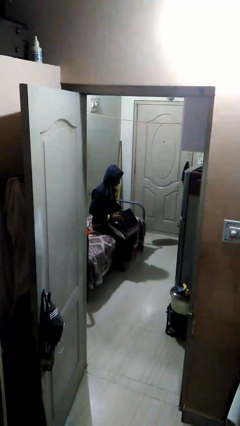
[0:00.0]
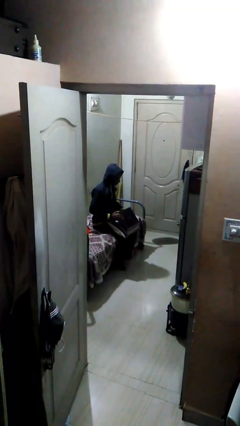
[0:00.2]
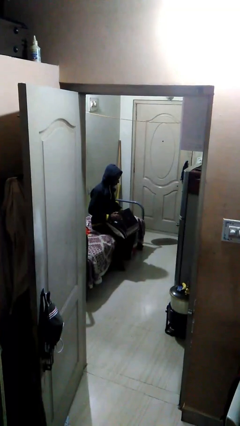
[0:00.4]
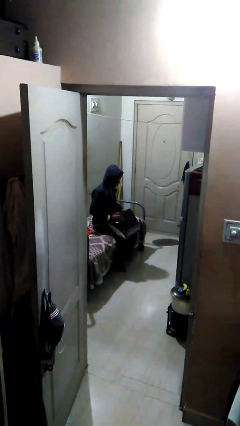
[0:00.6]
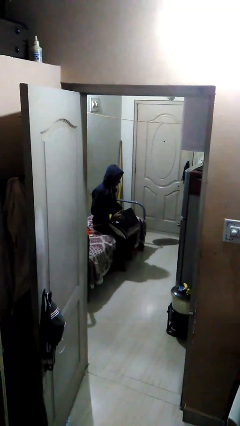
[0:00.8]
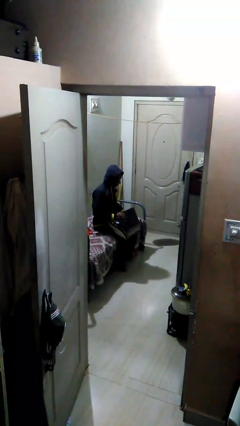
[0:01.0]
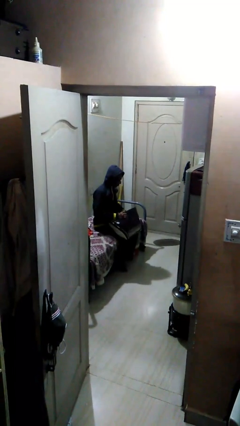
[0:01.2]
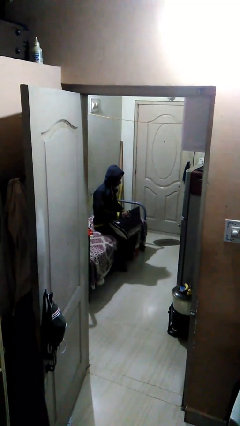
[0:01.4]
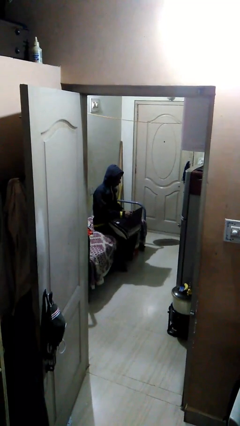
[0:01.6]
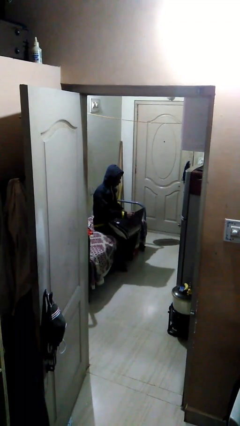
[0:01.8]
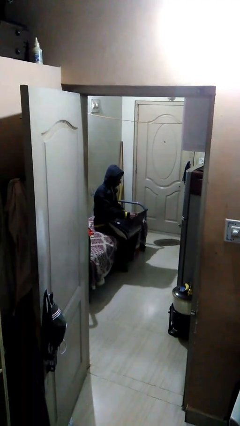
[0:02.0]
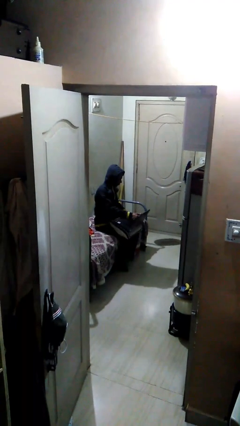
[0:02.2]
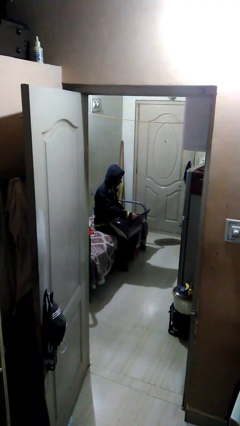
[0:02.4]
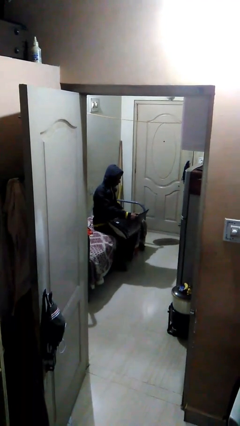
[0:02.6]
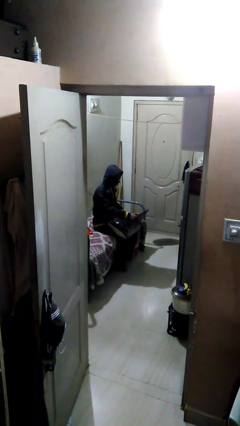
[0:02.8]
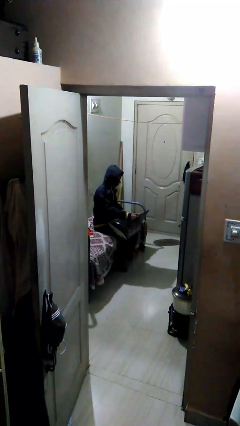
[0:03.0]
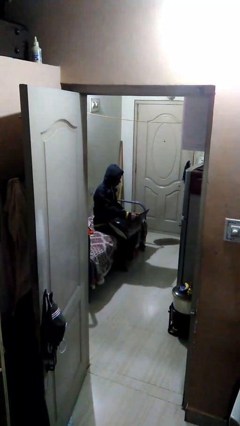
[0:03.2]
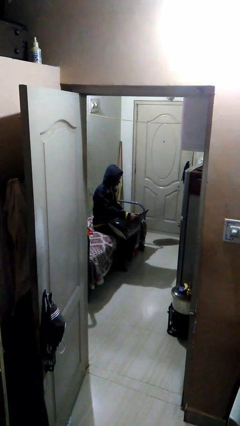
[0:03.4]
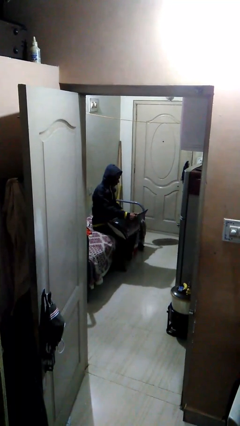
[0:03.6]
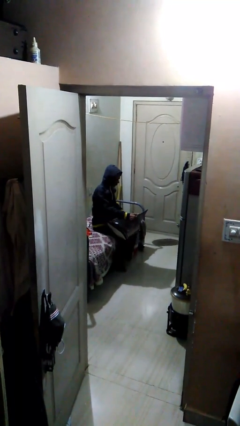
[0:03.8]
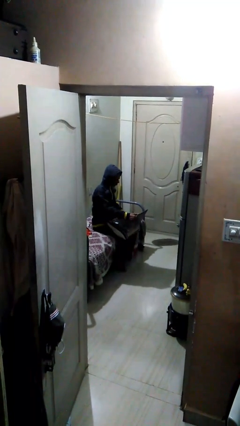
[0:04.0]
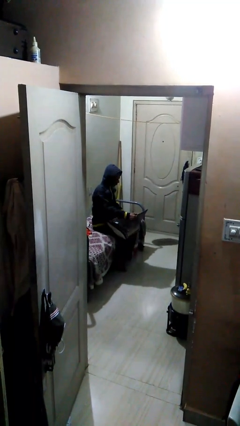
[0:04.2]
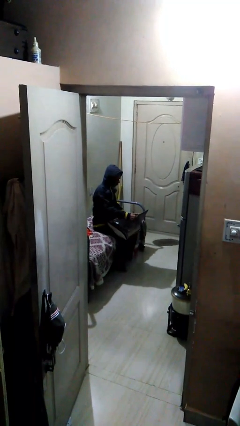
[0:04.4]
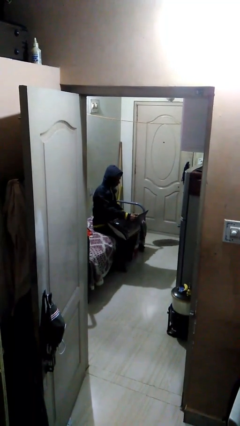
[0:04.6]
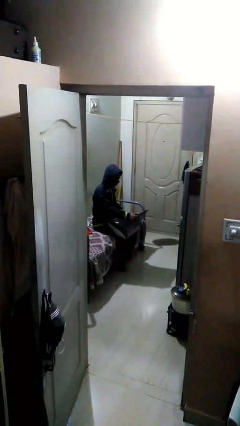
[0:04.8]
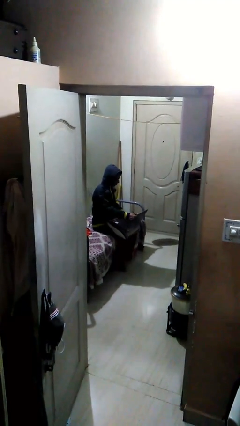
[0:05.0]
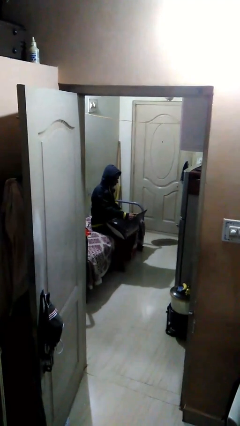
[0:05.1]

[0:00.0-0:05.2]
person interacts with laptop

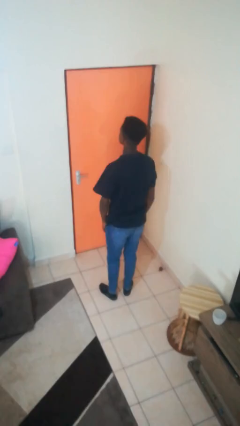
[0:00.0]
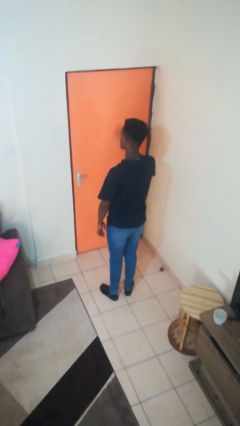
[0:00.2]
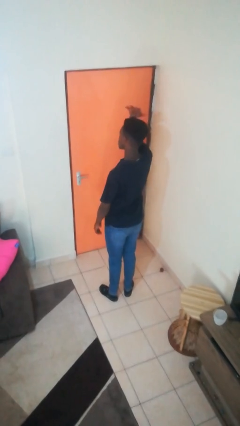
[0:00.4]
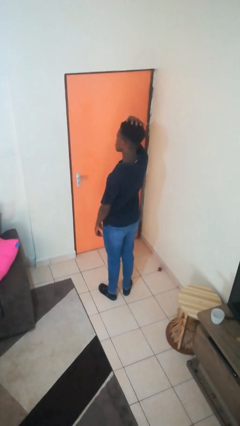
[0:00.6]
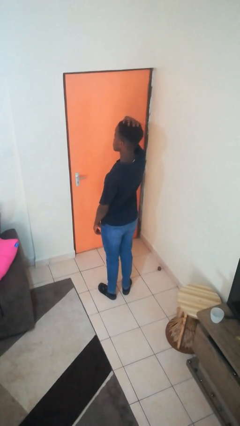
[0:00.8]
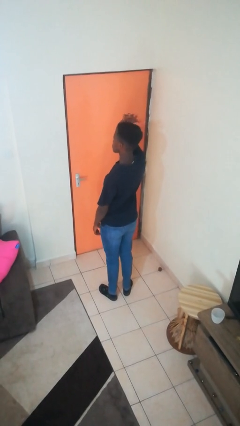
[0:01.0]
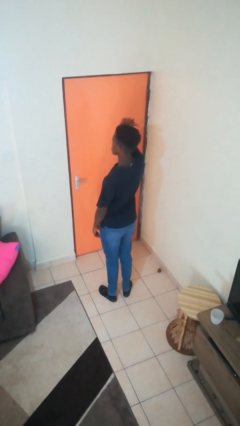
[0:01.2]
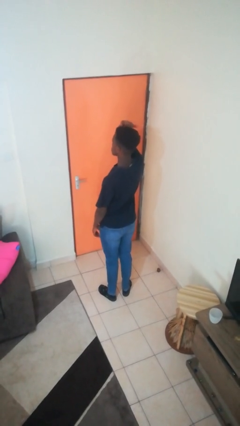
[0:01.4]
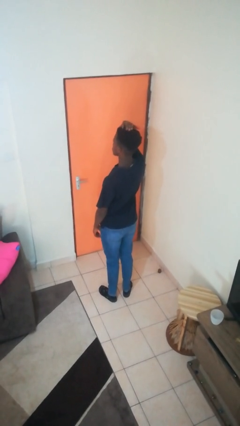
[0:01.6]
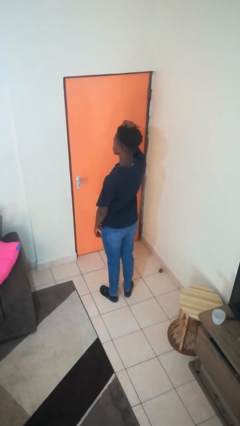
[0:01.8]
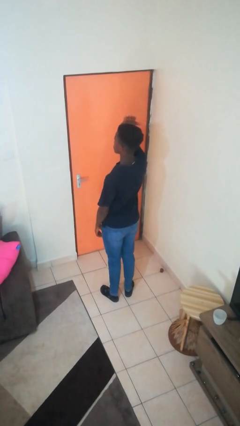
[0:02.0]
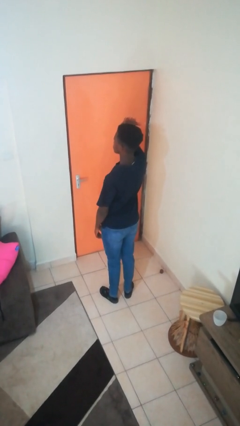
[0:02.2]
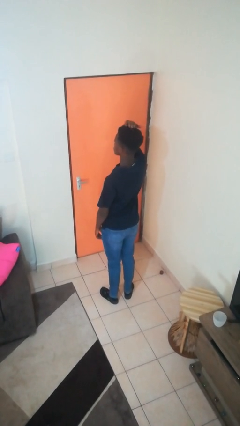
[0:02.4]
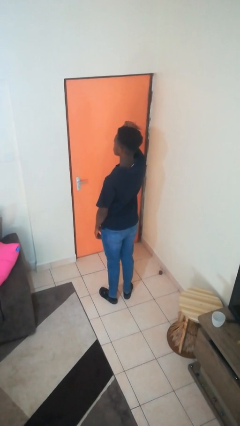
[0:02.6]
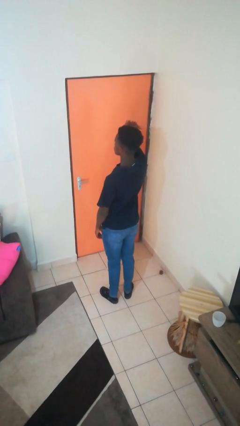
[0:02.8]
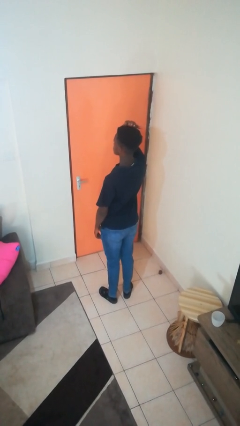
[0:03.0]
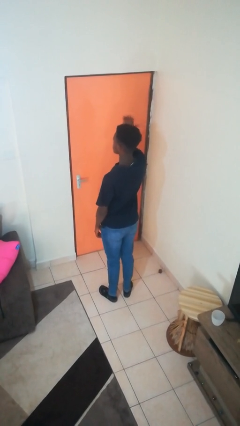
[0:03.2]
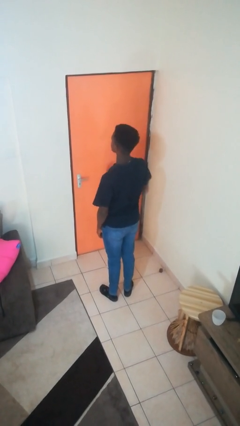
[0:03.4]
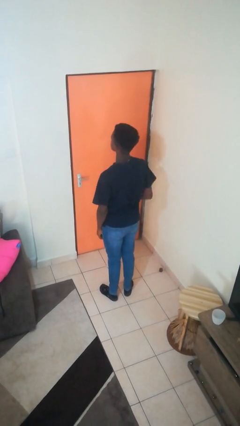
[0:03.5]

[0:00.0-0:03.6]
person pats head

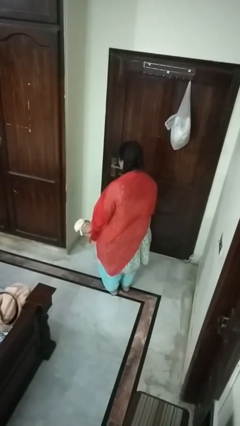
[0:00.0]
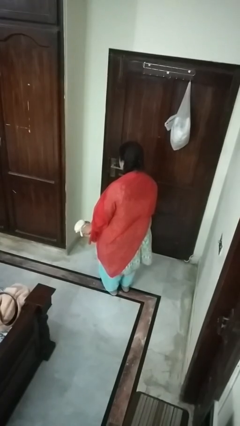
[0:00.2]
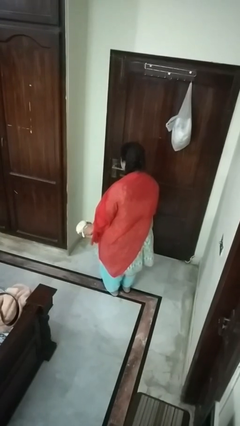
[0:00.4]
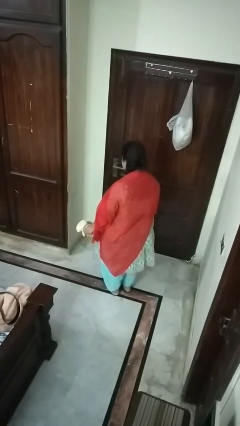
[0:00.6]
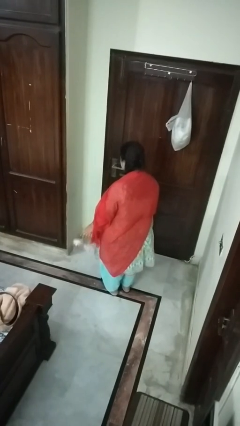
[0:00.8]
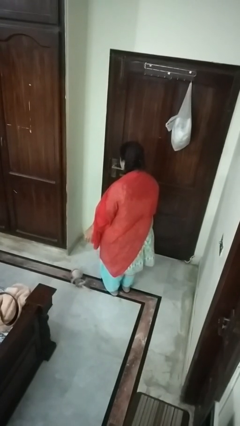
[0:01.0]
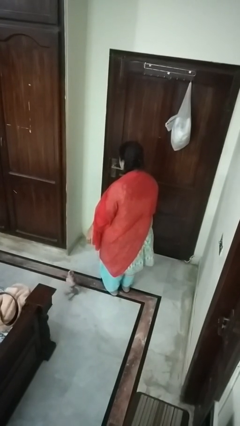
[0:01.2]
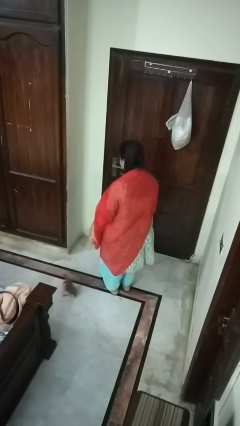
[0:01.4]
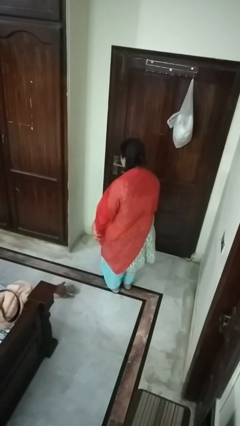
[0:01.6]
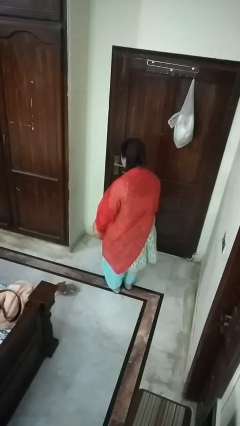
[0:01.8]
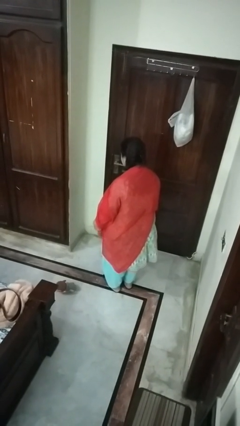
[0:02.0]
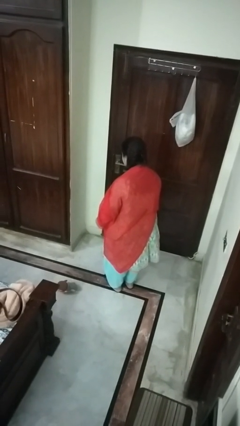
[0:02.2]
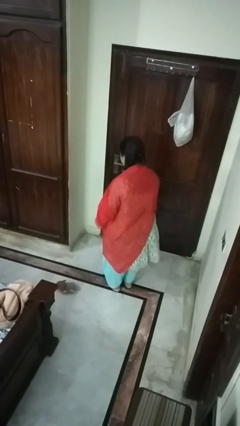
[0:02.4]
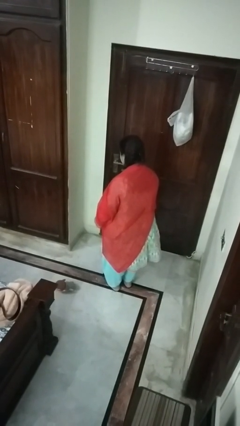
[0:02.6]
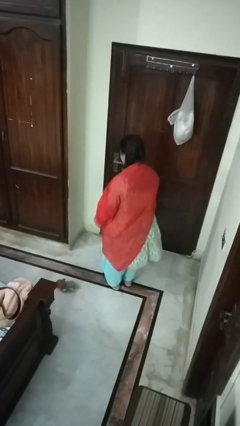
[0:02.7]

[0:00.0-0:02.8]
person drops object

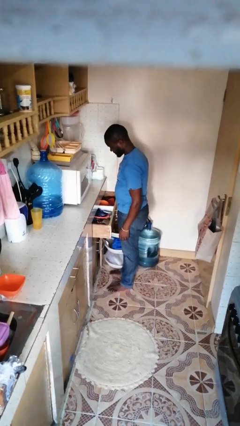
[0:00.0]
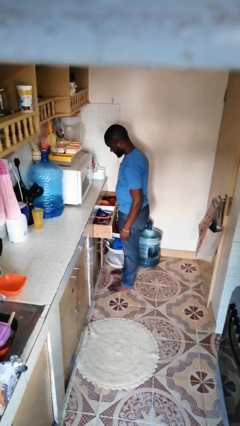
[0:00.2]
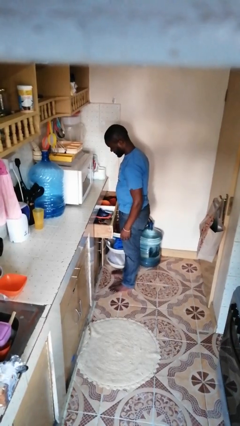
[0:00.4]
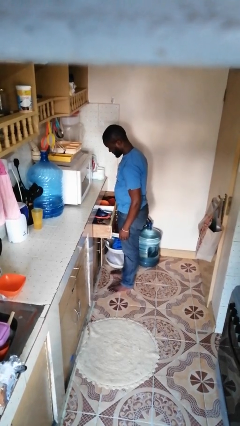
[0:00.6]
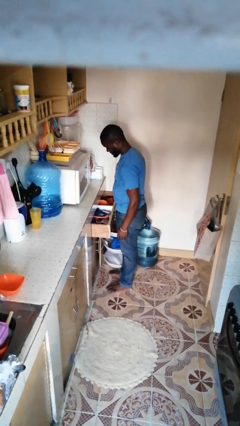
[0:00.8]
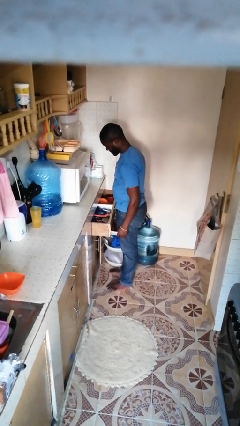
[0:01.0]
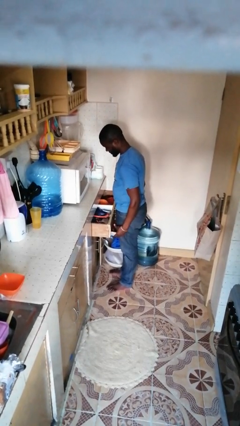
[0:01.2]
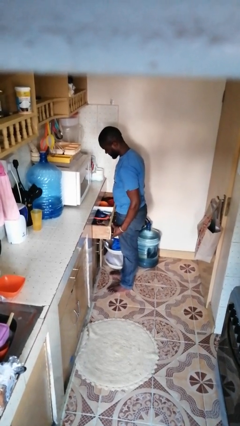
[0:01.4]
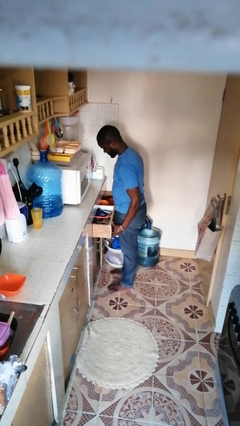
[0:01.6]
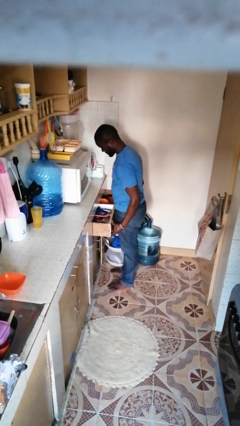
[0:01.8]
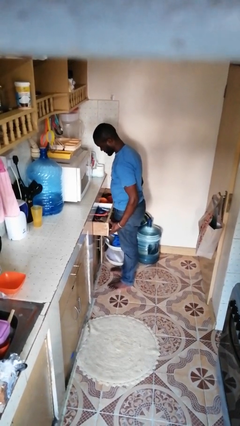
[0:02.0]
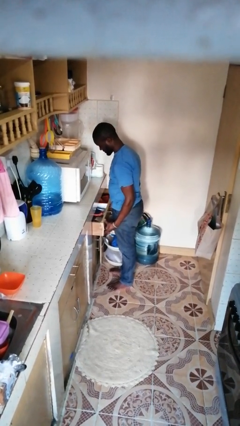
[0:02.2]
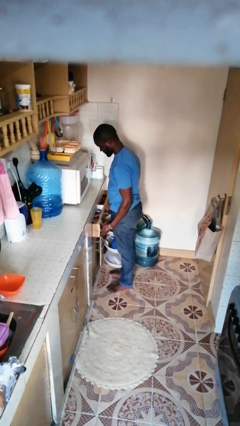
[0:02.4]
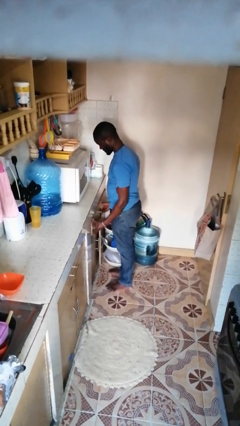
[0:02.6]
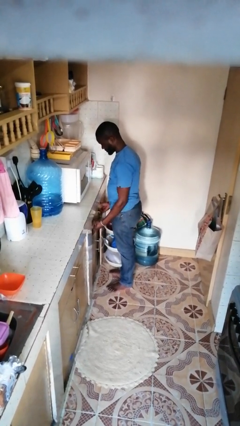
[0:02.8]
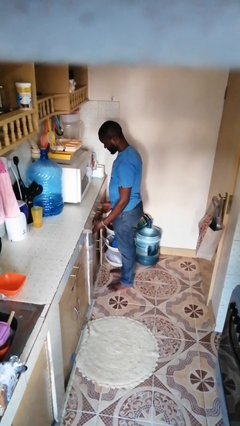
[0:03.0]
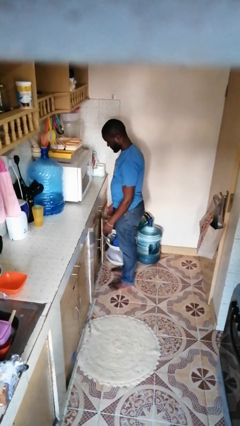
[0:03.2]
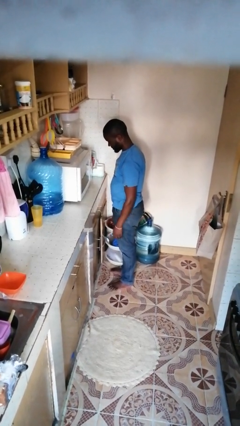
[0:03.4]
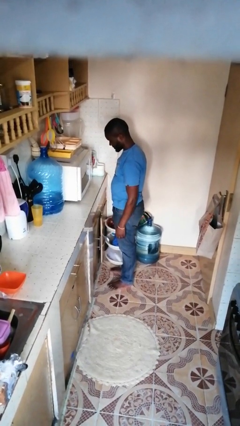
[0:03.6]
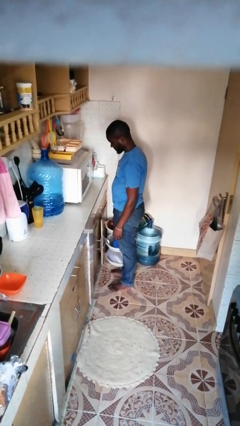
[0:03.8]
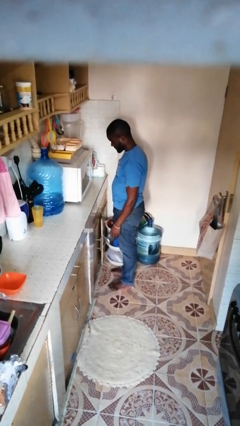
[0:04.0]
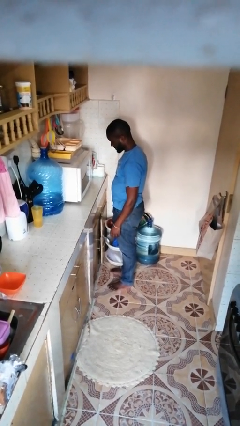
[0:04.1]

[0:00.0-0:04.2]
person closes kitchen drawer

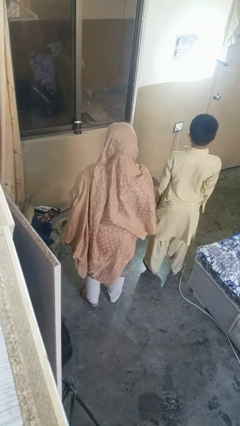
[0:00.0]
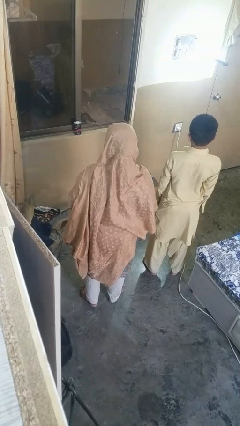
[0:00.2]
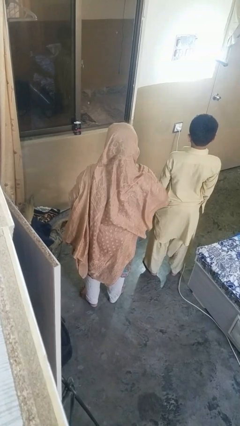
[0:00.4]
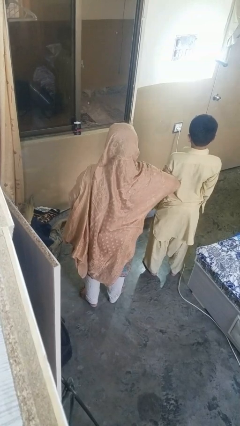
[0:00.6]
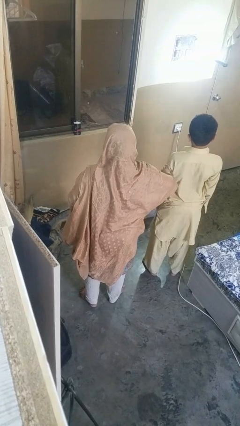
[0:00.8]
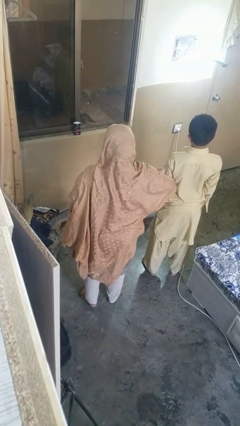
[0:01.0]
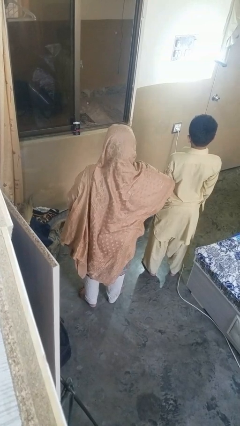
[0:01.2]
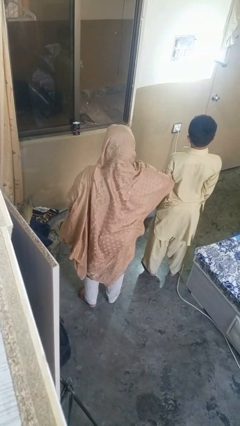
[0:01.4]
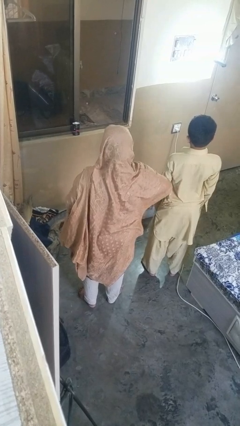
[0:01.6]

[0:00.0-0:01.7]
person grabs person by bicep

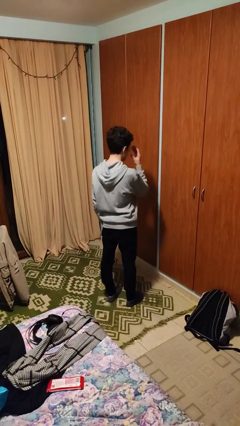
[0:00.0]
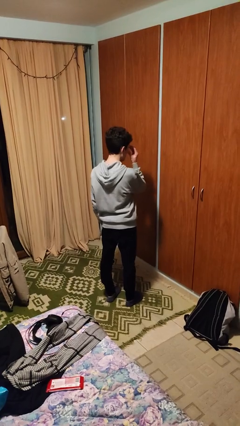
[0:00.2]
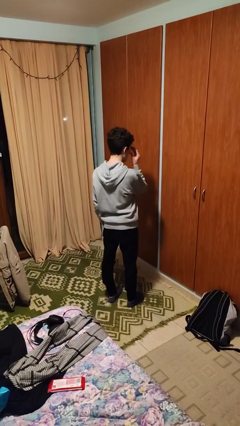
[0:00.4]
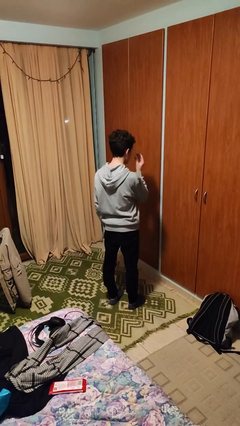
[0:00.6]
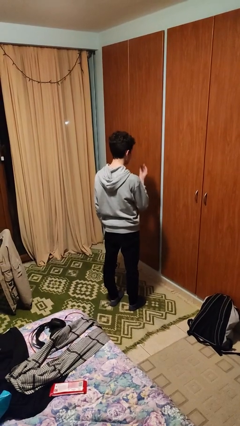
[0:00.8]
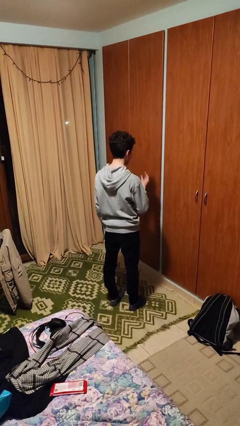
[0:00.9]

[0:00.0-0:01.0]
person takes off glasses
